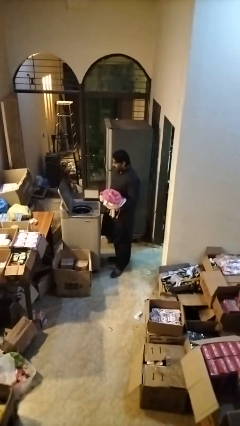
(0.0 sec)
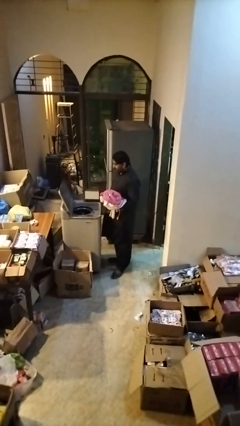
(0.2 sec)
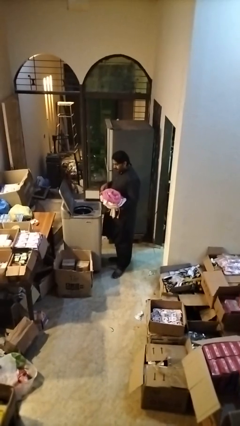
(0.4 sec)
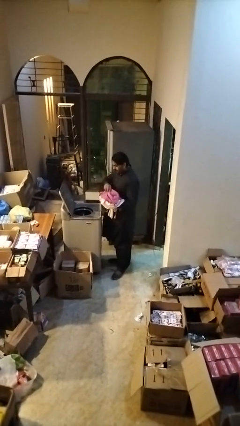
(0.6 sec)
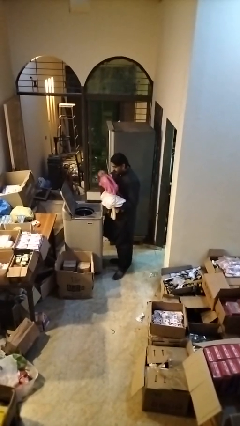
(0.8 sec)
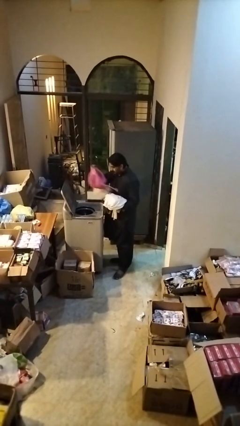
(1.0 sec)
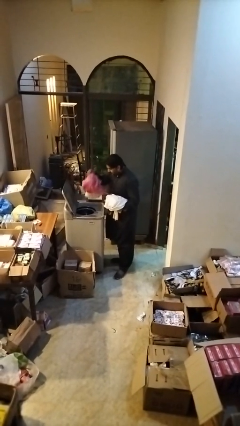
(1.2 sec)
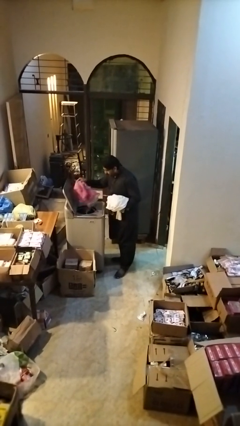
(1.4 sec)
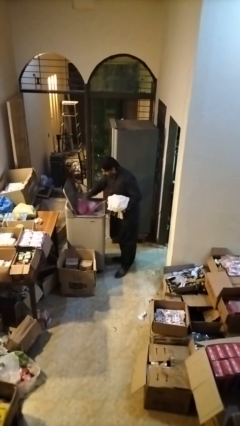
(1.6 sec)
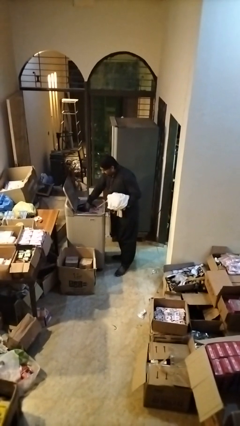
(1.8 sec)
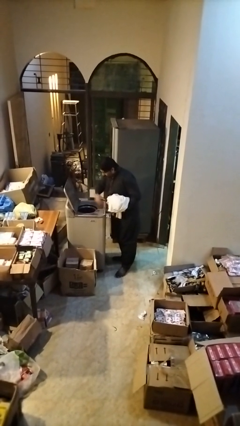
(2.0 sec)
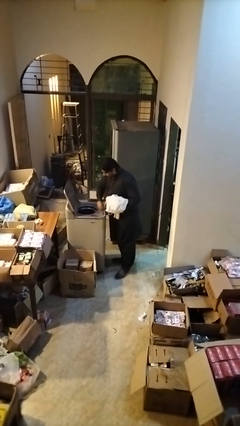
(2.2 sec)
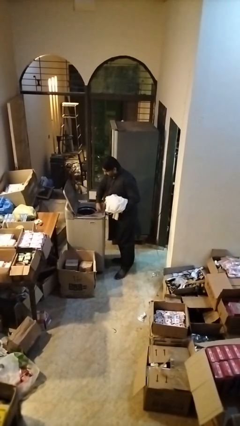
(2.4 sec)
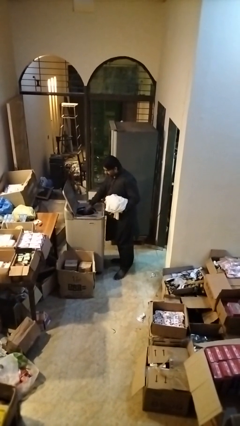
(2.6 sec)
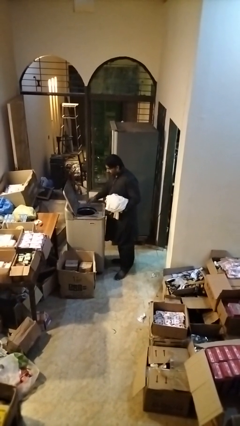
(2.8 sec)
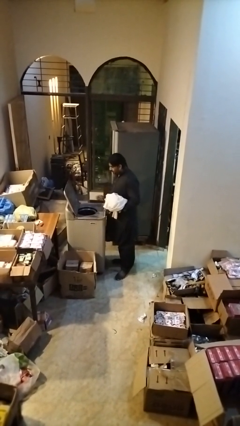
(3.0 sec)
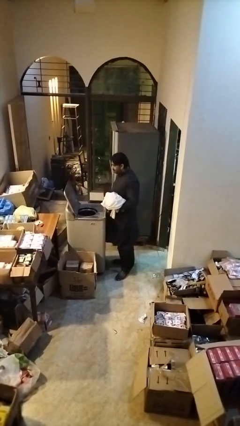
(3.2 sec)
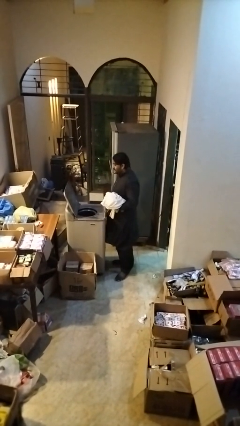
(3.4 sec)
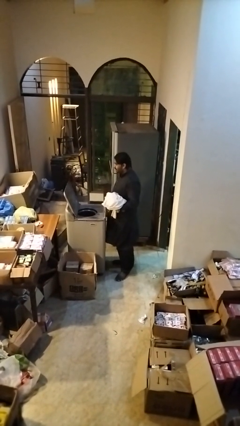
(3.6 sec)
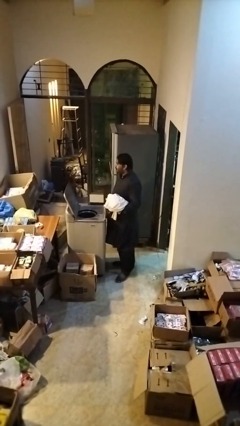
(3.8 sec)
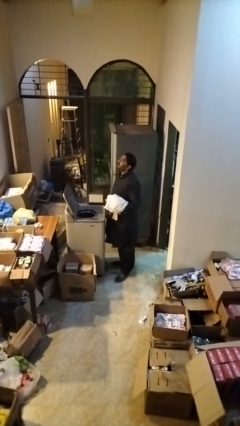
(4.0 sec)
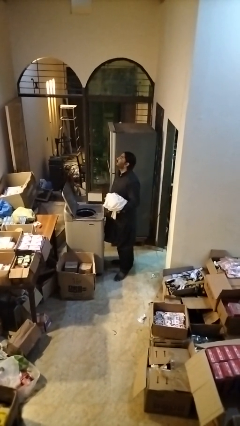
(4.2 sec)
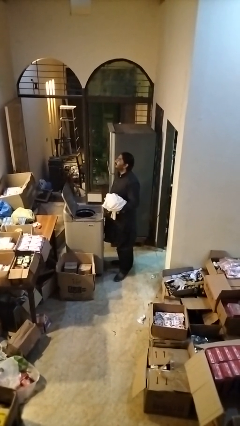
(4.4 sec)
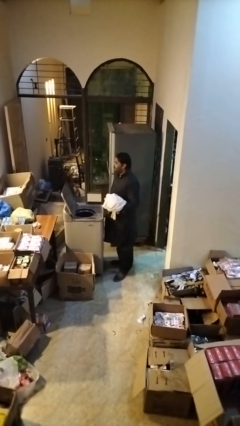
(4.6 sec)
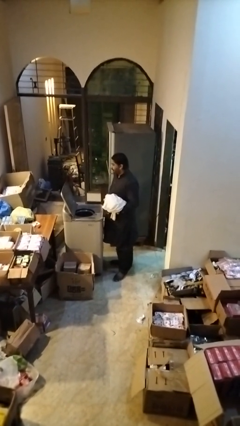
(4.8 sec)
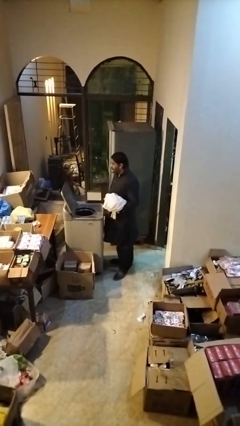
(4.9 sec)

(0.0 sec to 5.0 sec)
person loads dryer

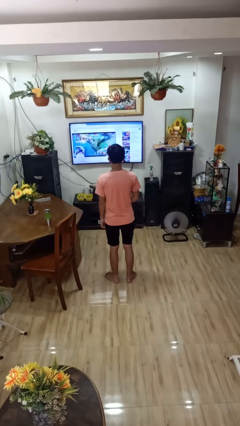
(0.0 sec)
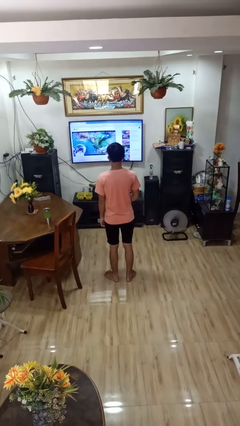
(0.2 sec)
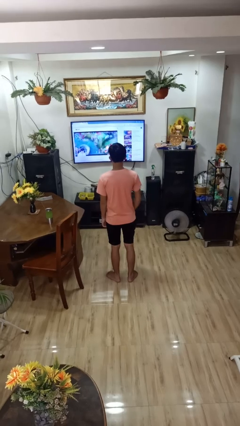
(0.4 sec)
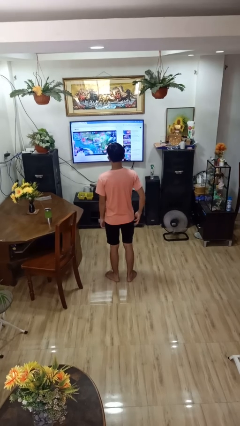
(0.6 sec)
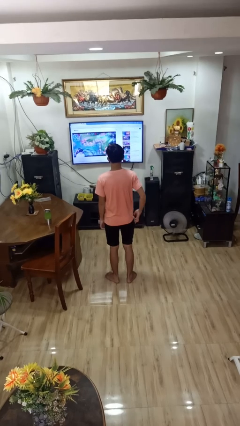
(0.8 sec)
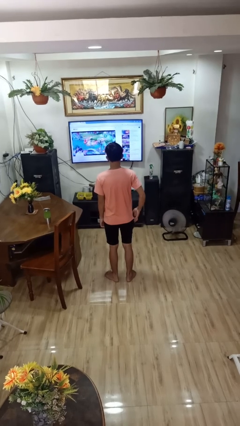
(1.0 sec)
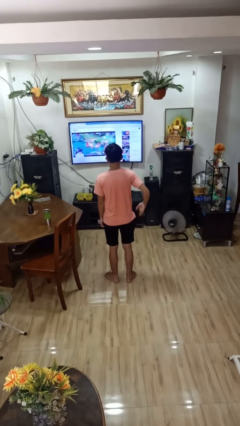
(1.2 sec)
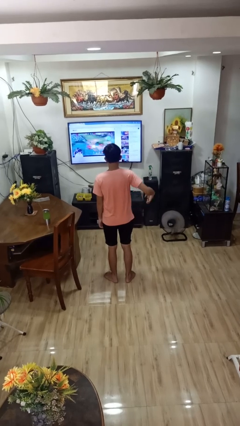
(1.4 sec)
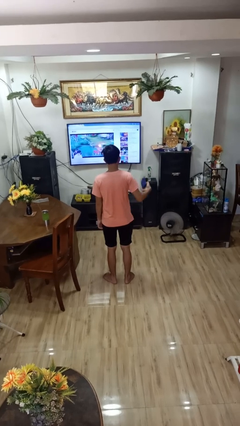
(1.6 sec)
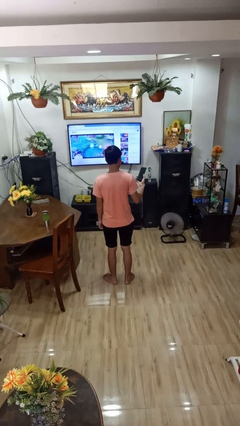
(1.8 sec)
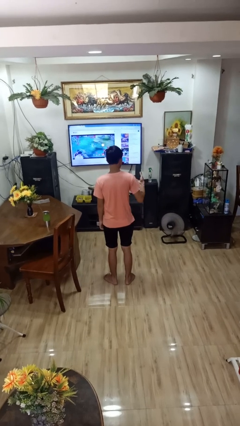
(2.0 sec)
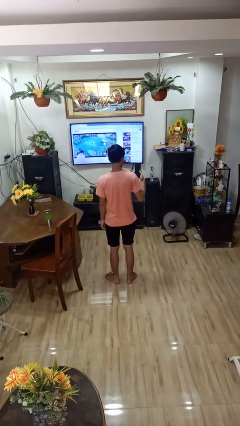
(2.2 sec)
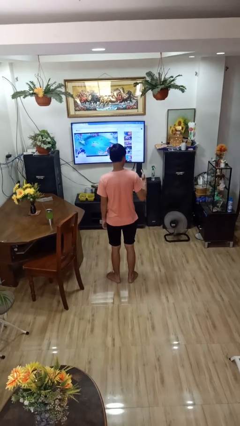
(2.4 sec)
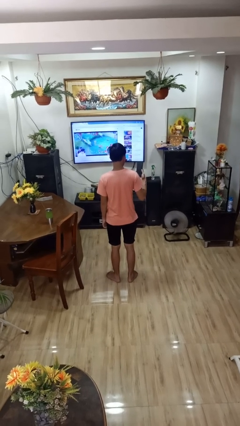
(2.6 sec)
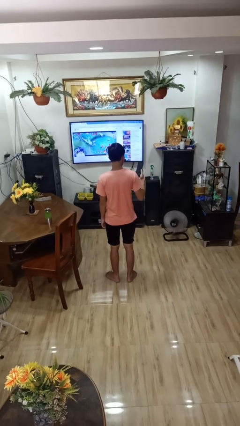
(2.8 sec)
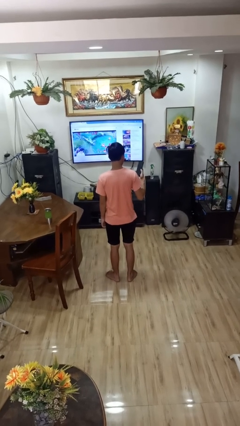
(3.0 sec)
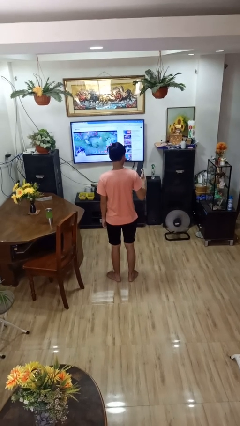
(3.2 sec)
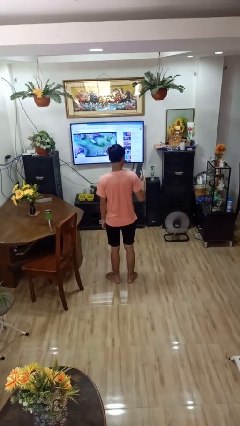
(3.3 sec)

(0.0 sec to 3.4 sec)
person takes phone from pocket

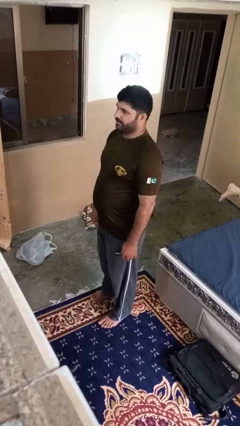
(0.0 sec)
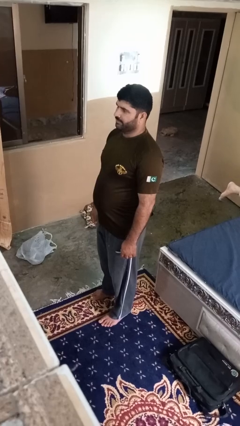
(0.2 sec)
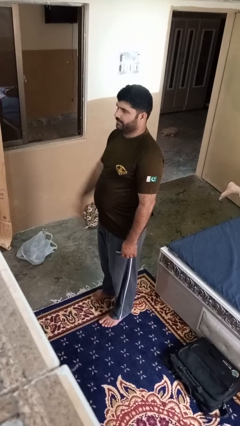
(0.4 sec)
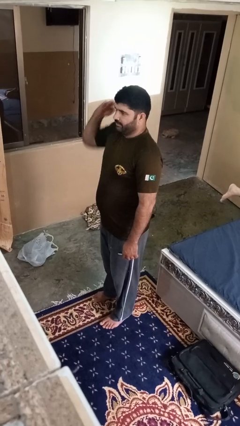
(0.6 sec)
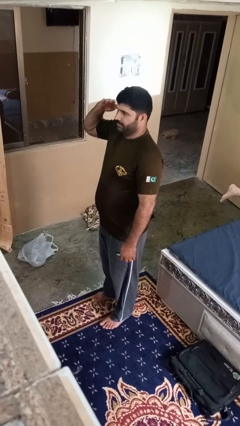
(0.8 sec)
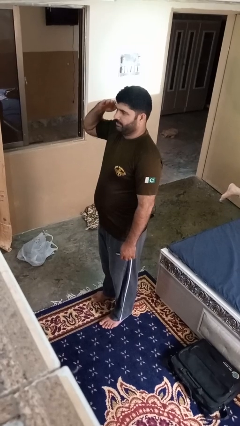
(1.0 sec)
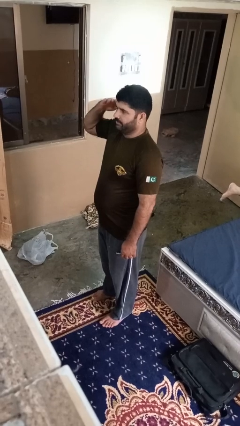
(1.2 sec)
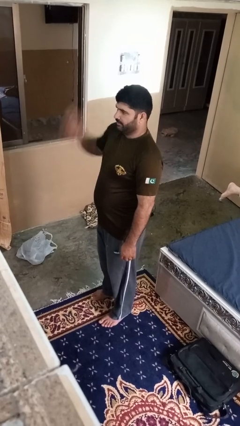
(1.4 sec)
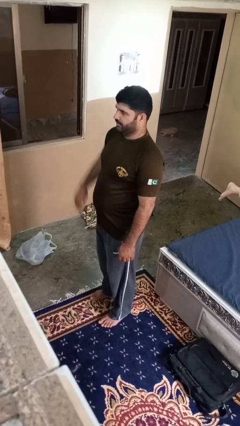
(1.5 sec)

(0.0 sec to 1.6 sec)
person salutes

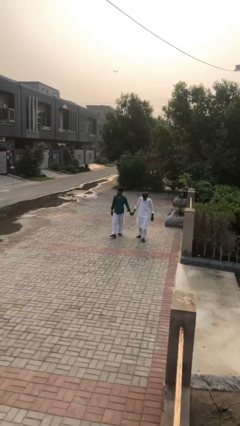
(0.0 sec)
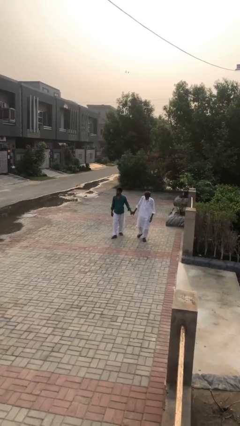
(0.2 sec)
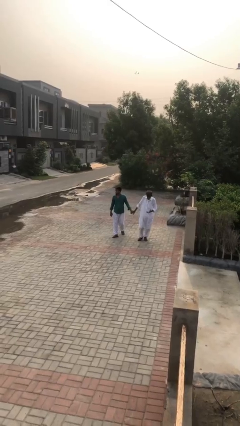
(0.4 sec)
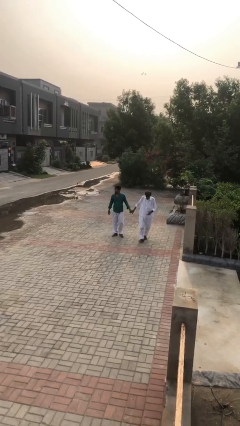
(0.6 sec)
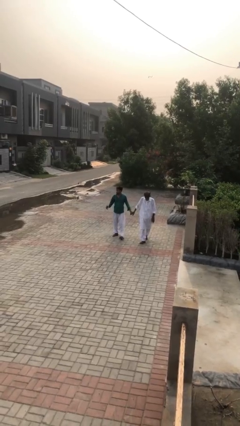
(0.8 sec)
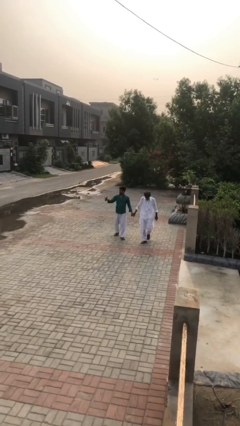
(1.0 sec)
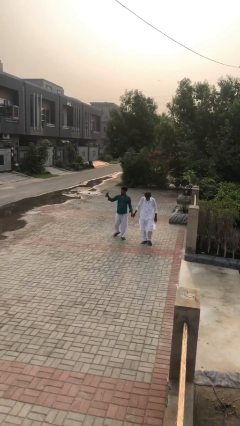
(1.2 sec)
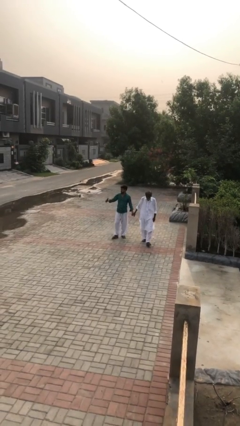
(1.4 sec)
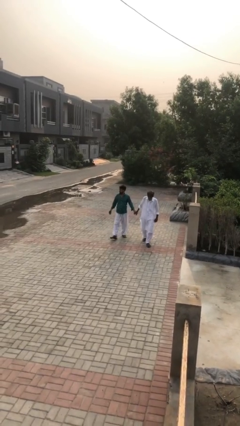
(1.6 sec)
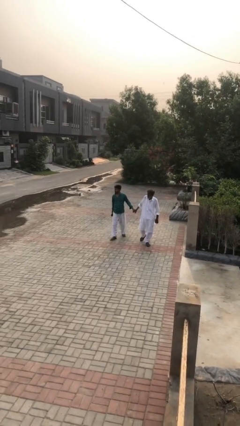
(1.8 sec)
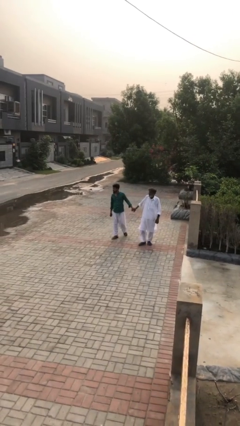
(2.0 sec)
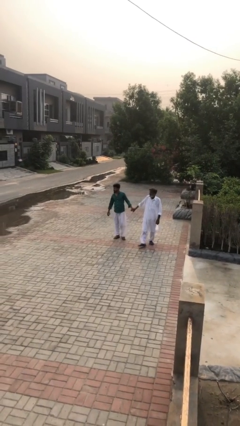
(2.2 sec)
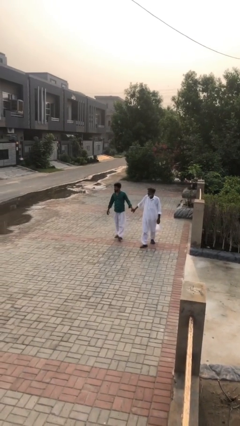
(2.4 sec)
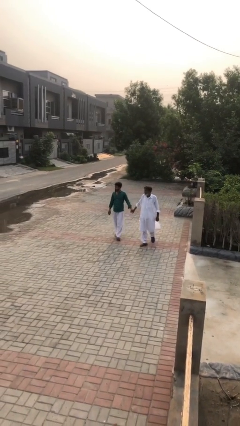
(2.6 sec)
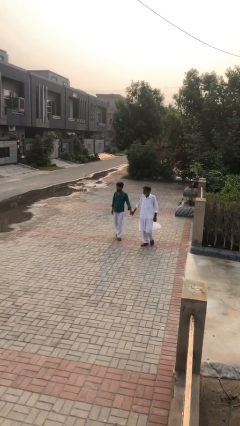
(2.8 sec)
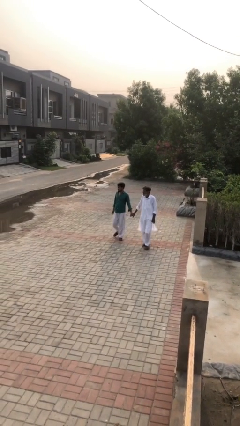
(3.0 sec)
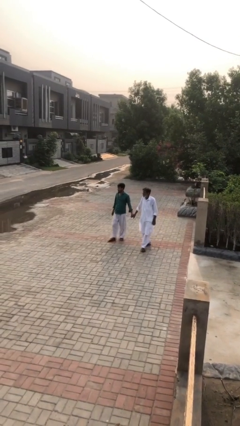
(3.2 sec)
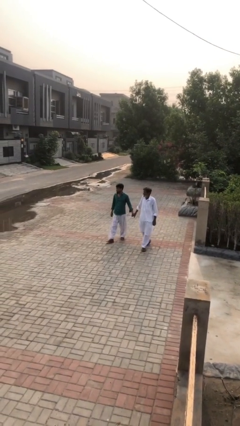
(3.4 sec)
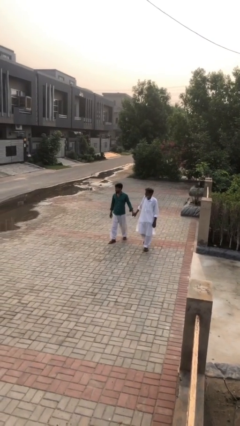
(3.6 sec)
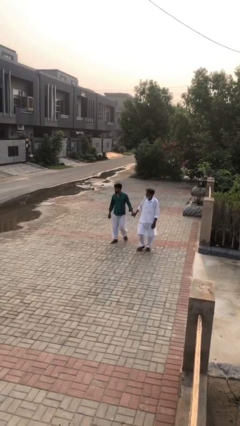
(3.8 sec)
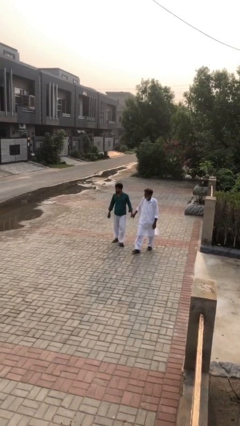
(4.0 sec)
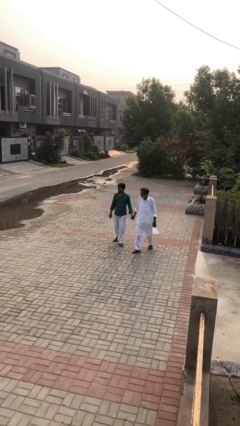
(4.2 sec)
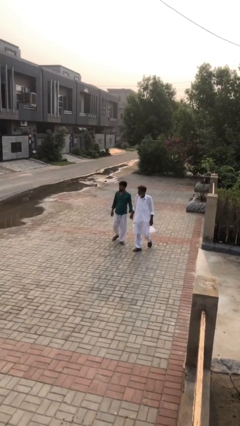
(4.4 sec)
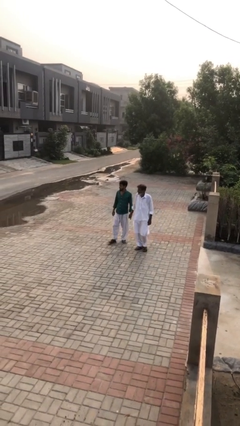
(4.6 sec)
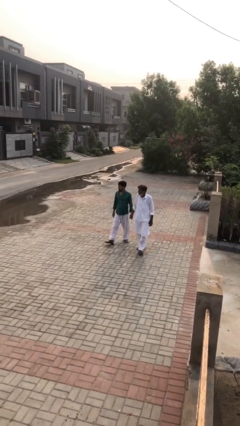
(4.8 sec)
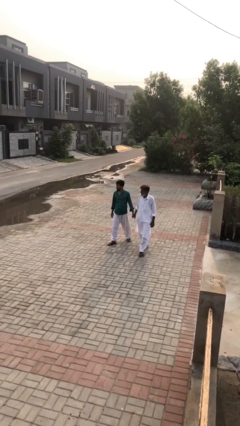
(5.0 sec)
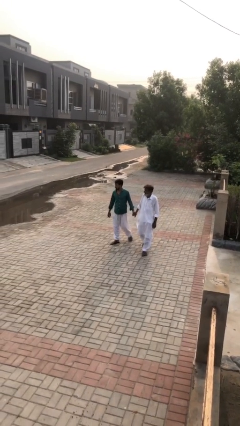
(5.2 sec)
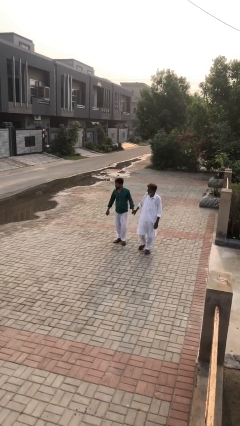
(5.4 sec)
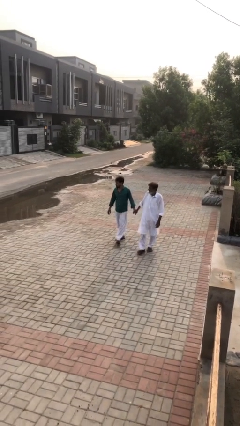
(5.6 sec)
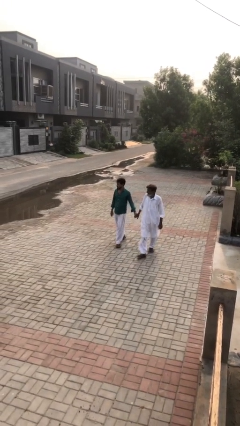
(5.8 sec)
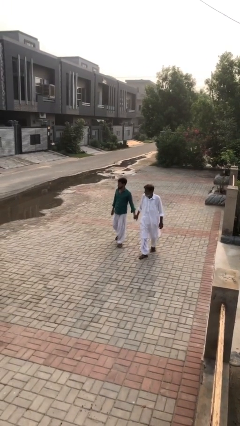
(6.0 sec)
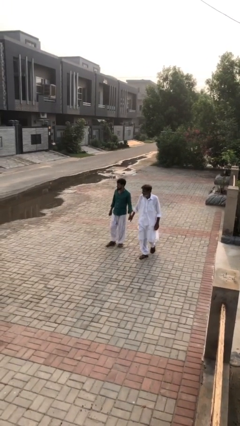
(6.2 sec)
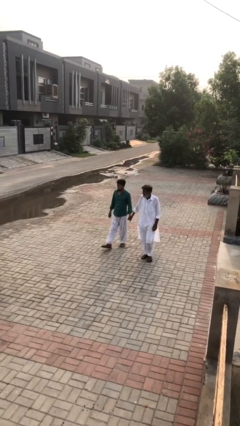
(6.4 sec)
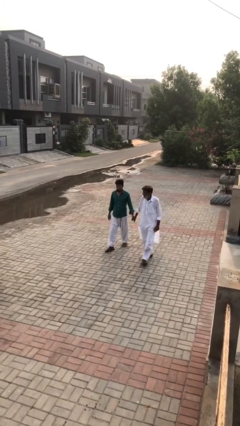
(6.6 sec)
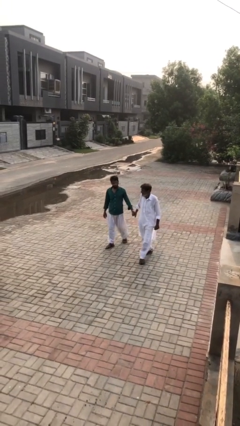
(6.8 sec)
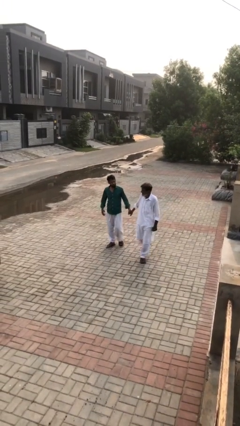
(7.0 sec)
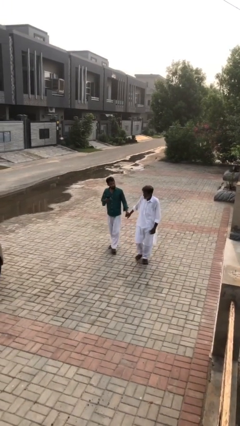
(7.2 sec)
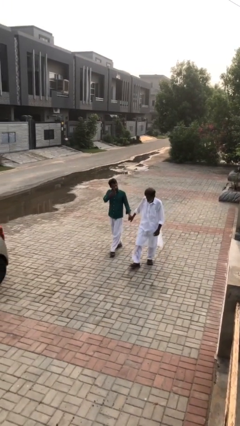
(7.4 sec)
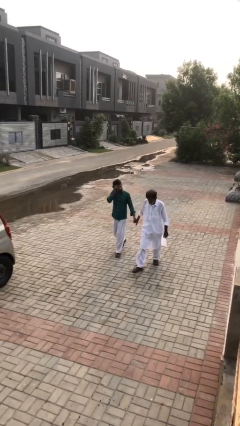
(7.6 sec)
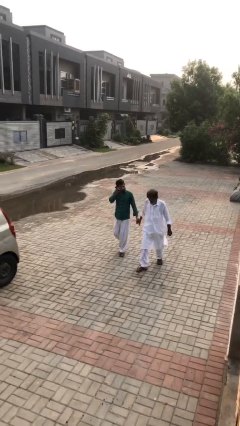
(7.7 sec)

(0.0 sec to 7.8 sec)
person holds hand
